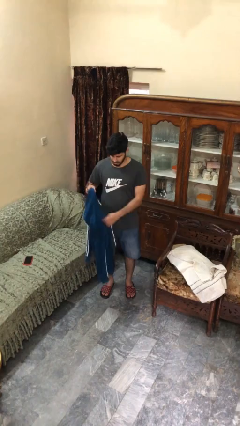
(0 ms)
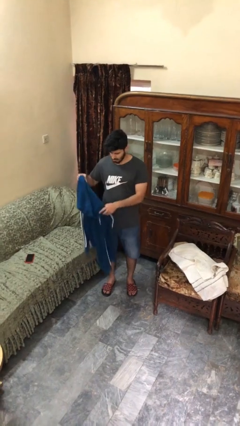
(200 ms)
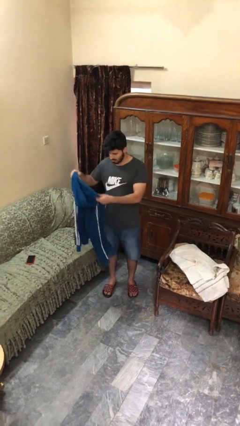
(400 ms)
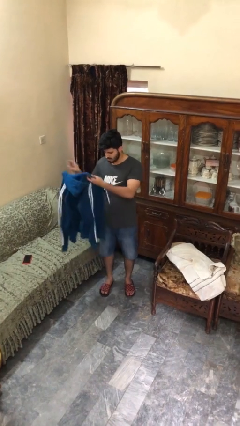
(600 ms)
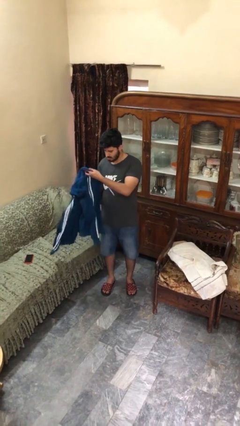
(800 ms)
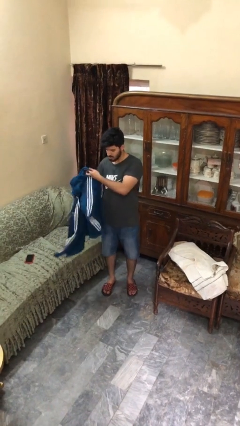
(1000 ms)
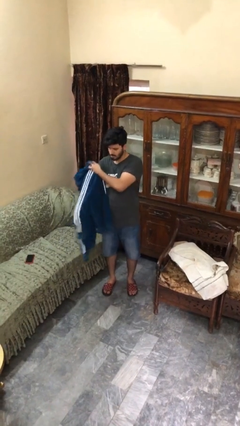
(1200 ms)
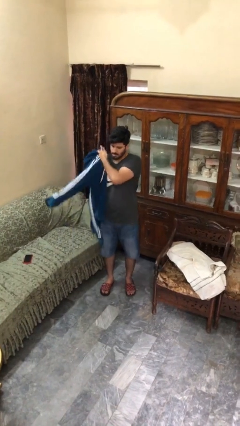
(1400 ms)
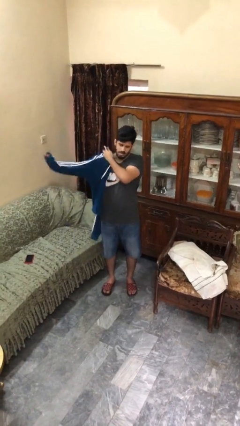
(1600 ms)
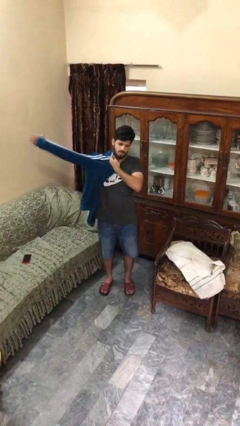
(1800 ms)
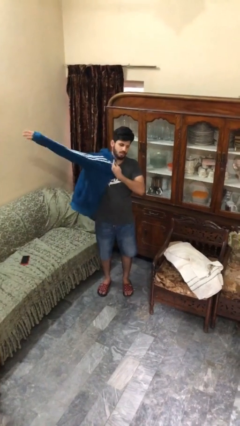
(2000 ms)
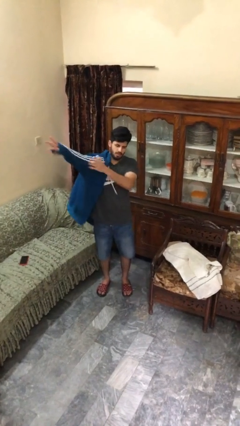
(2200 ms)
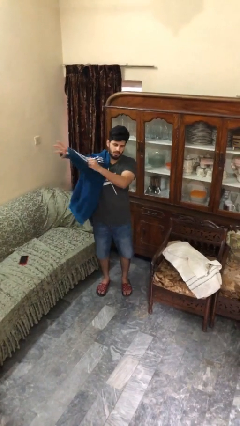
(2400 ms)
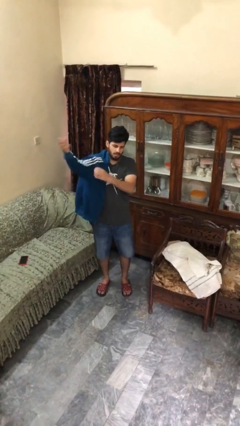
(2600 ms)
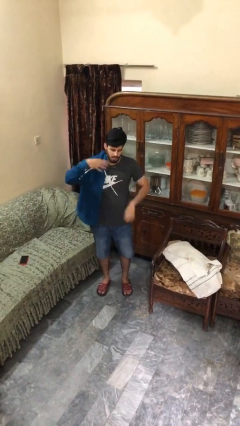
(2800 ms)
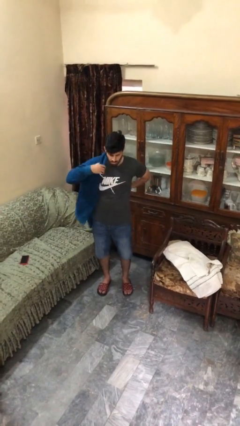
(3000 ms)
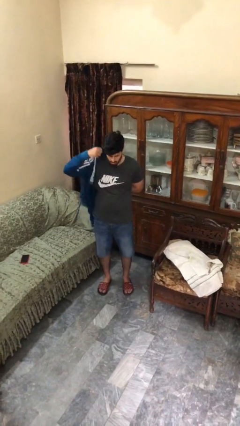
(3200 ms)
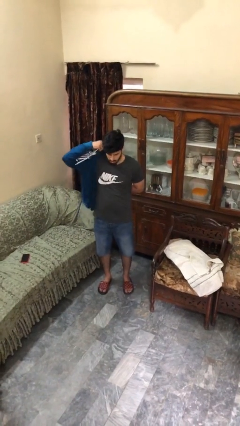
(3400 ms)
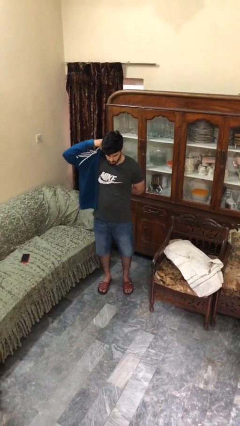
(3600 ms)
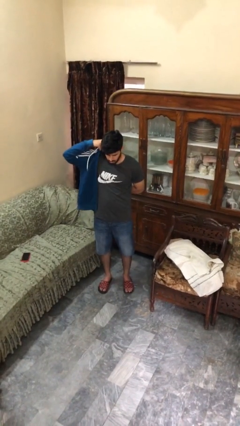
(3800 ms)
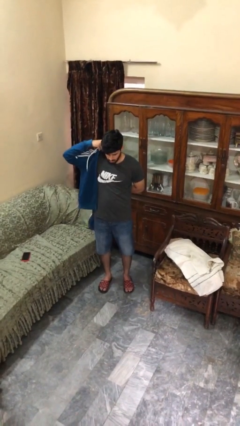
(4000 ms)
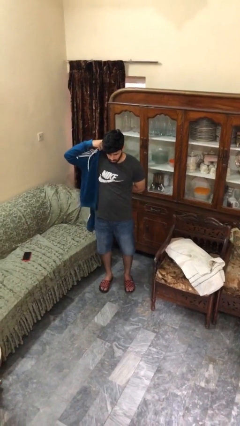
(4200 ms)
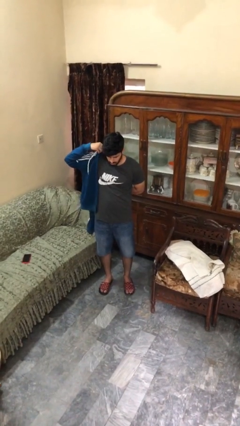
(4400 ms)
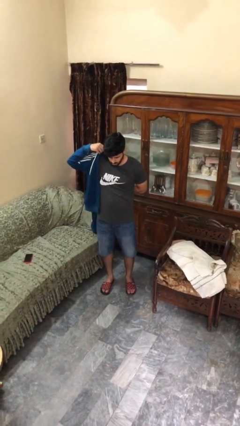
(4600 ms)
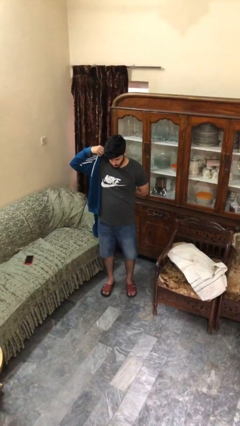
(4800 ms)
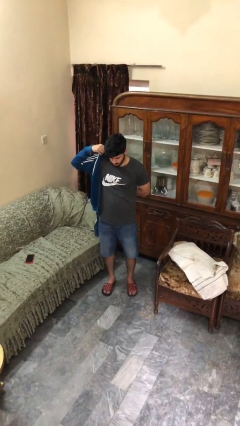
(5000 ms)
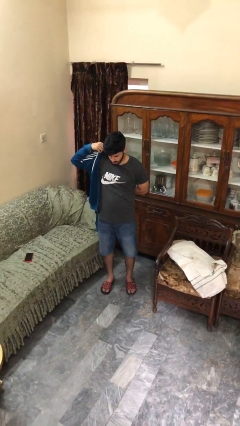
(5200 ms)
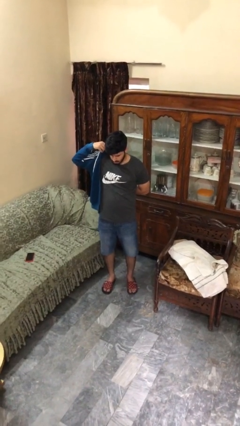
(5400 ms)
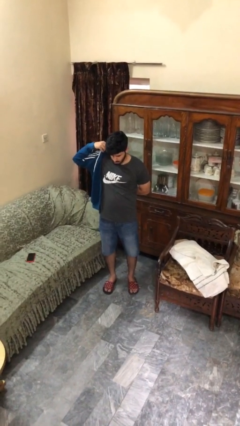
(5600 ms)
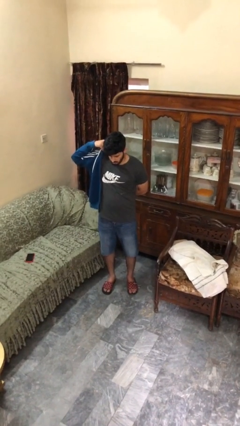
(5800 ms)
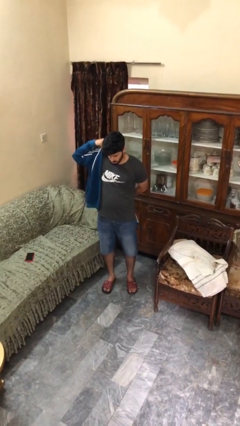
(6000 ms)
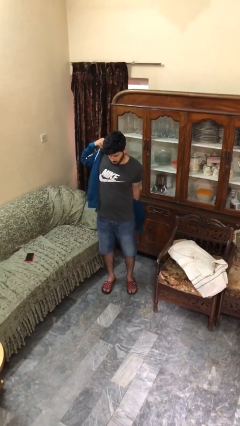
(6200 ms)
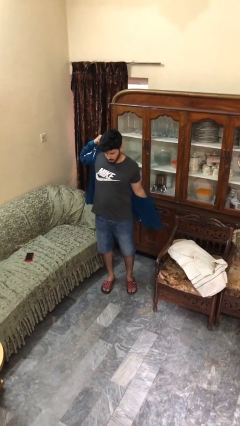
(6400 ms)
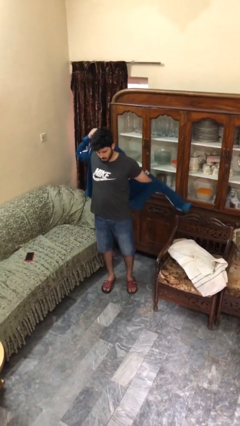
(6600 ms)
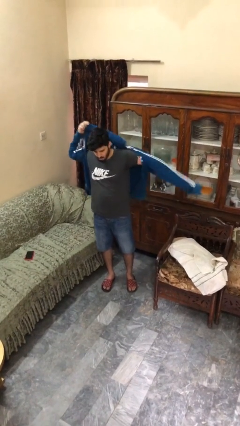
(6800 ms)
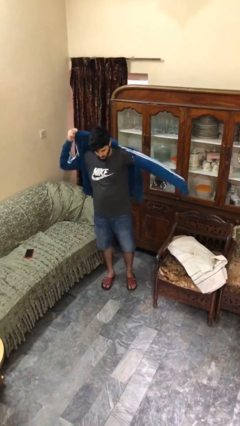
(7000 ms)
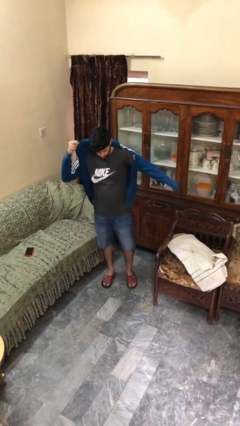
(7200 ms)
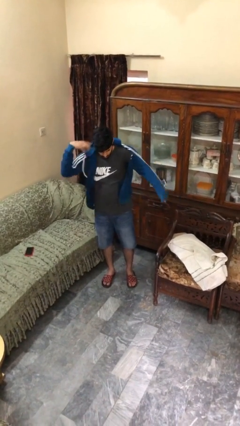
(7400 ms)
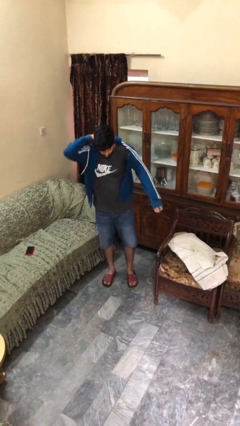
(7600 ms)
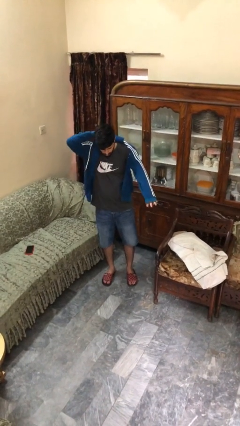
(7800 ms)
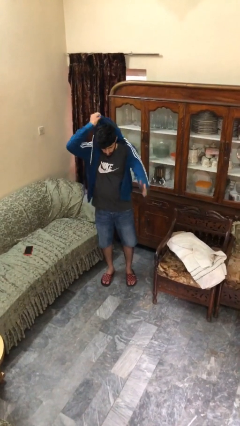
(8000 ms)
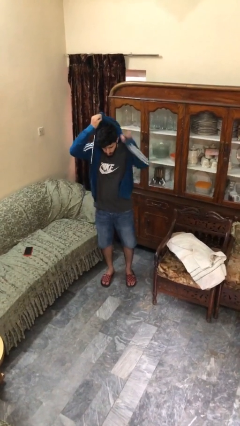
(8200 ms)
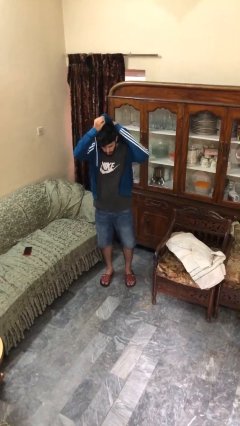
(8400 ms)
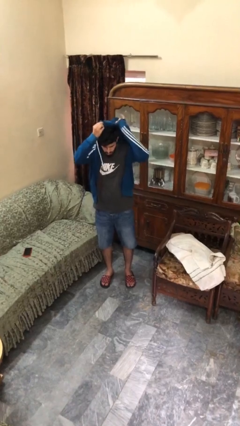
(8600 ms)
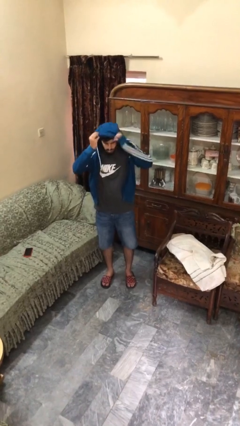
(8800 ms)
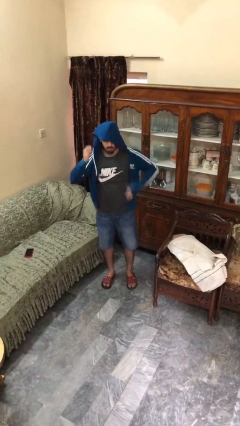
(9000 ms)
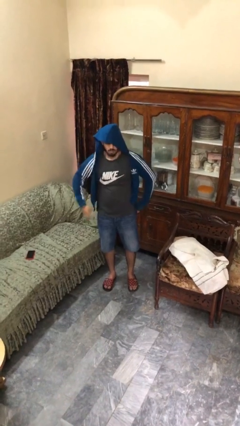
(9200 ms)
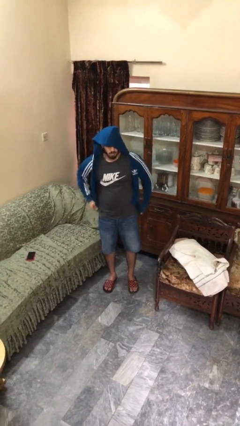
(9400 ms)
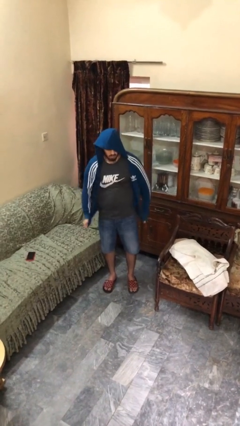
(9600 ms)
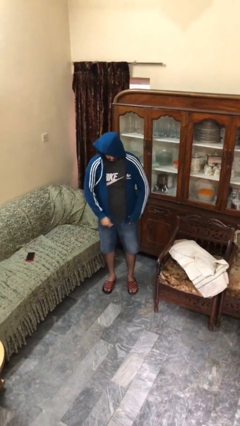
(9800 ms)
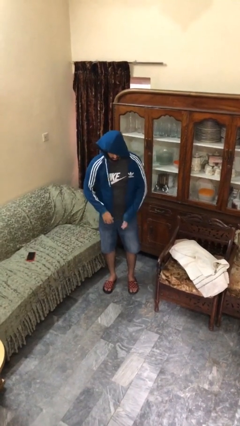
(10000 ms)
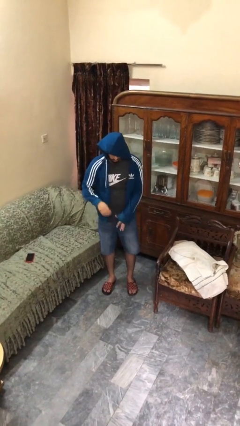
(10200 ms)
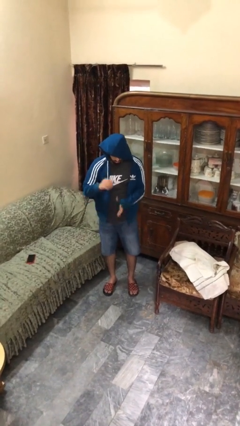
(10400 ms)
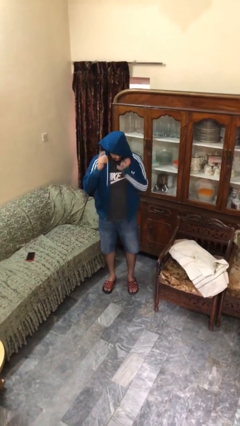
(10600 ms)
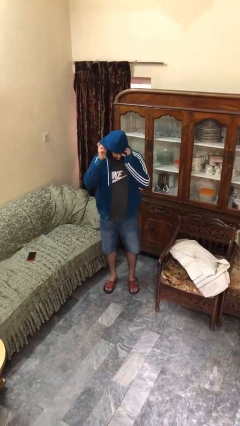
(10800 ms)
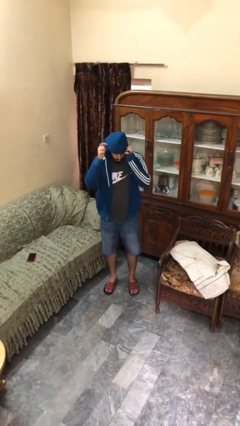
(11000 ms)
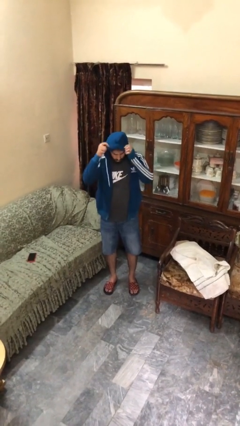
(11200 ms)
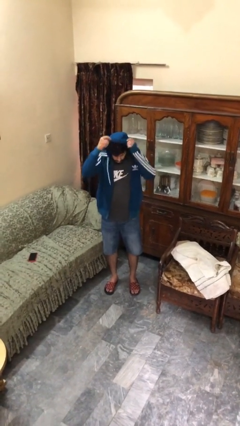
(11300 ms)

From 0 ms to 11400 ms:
person puts on hoodie

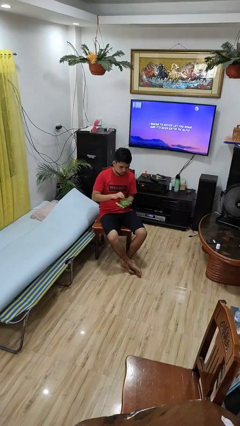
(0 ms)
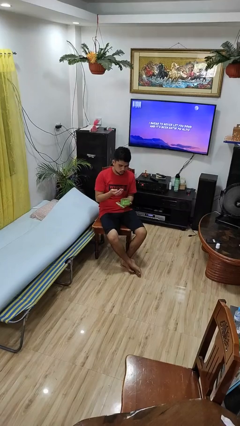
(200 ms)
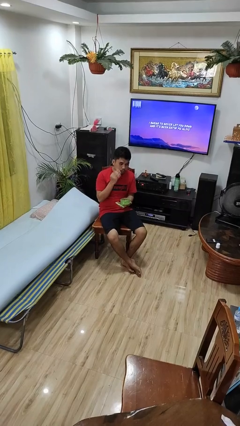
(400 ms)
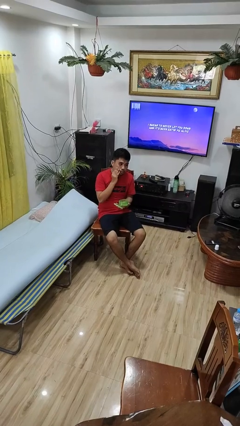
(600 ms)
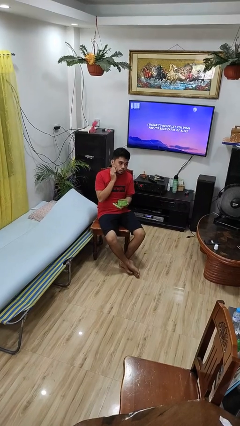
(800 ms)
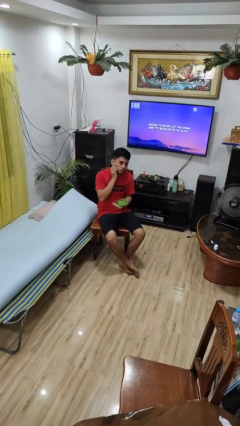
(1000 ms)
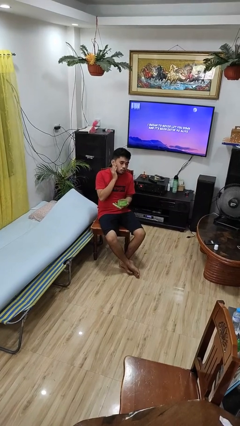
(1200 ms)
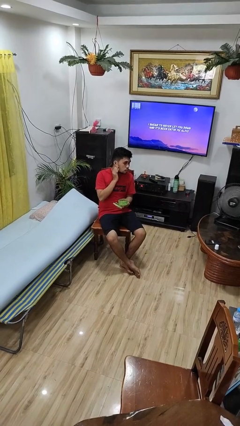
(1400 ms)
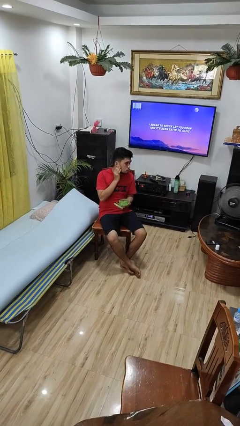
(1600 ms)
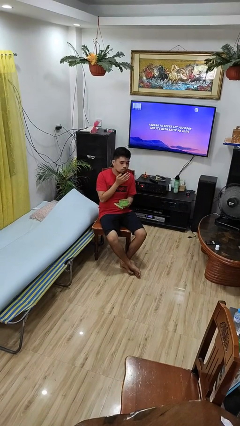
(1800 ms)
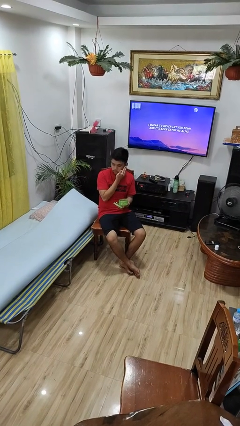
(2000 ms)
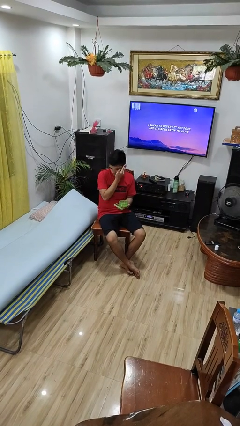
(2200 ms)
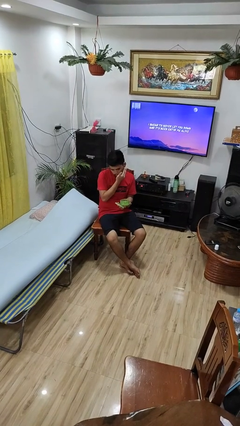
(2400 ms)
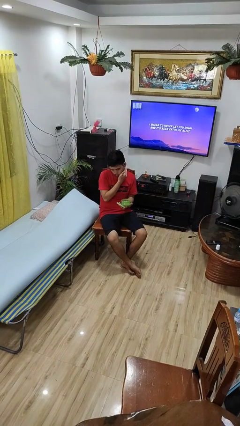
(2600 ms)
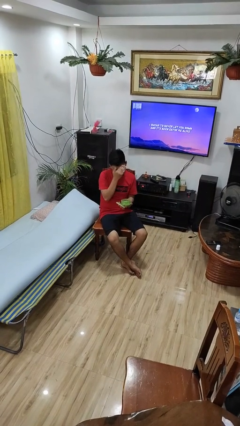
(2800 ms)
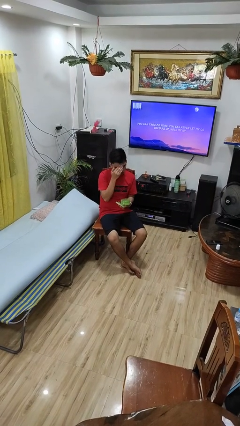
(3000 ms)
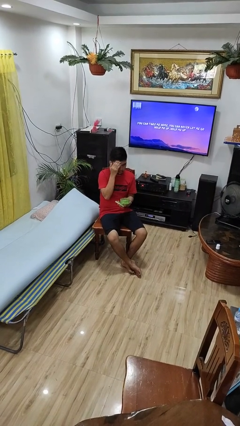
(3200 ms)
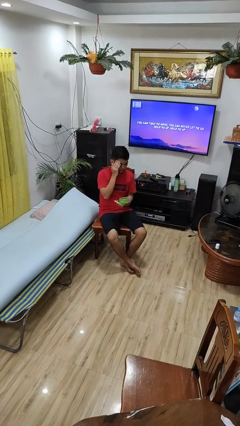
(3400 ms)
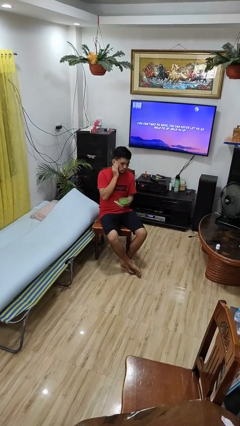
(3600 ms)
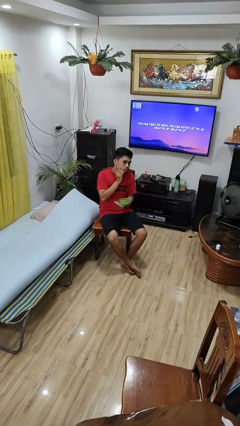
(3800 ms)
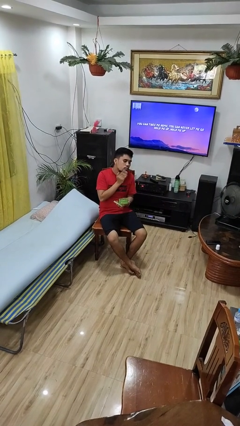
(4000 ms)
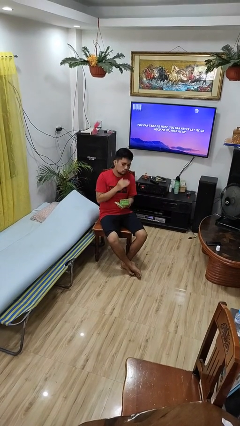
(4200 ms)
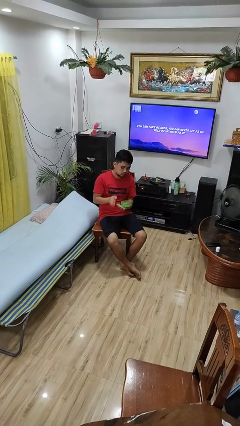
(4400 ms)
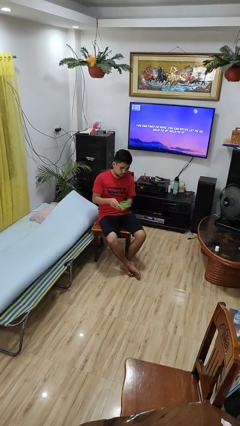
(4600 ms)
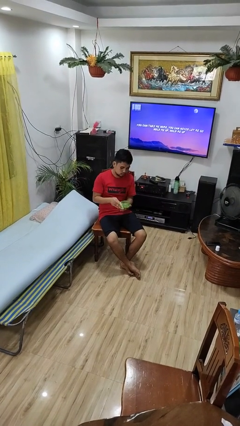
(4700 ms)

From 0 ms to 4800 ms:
person applies facial moisturizer

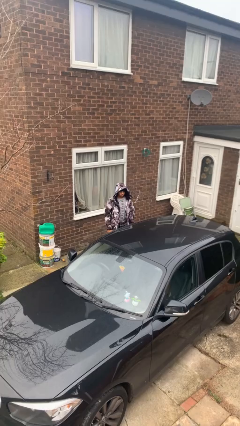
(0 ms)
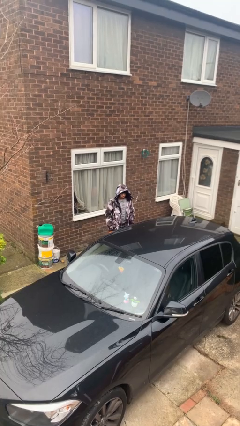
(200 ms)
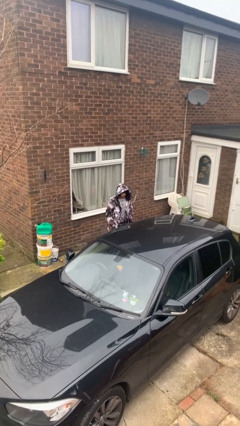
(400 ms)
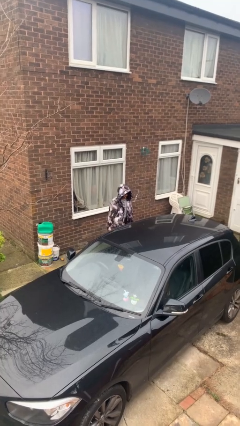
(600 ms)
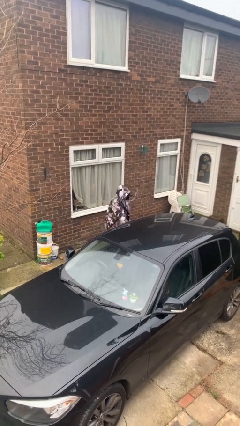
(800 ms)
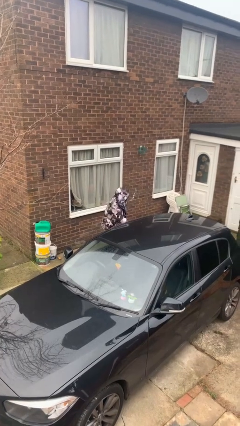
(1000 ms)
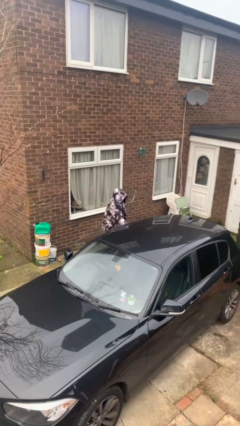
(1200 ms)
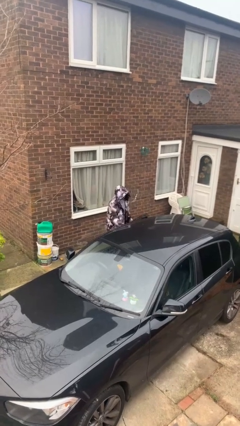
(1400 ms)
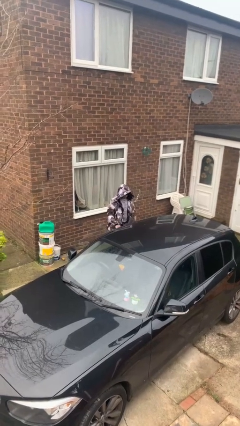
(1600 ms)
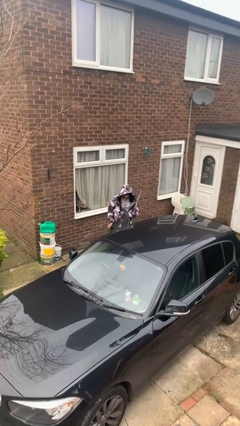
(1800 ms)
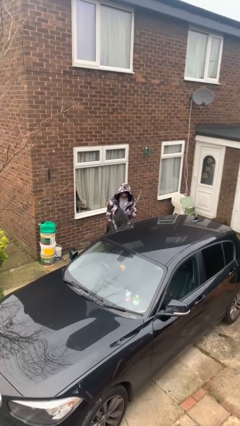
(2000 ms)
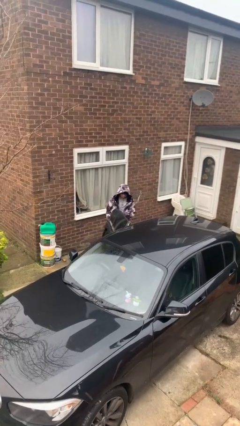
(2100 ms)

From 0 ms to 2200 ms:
person opens car door
